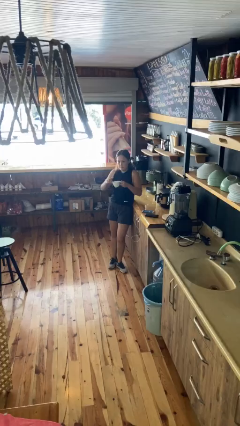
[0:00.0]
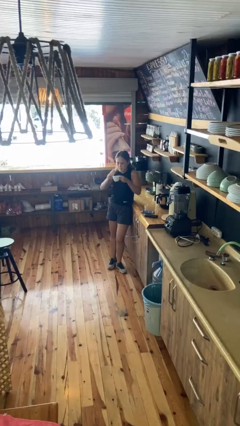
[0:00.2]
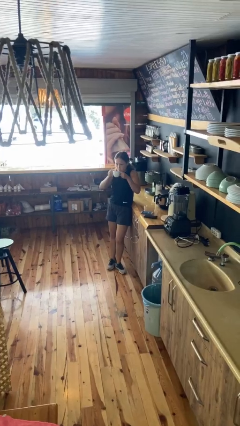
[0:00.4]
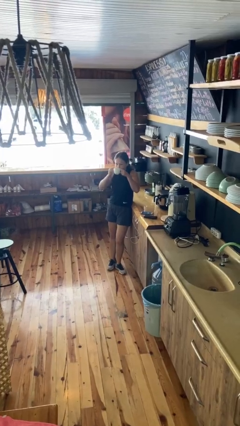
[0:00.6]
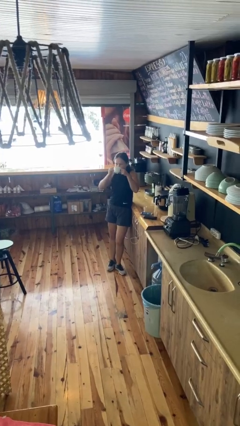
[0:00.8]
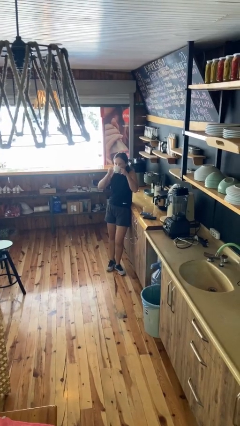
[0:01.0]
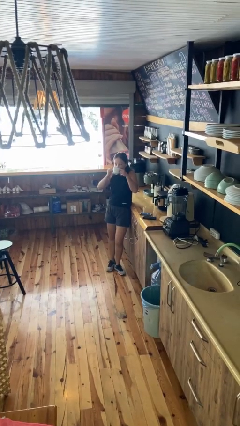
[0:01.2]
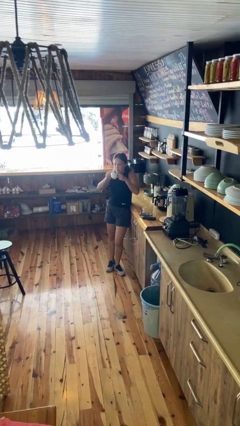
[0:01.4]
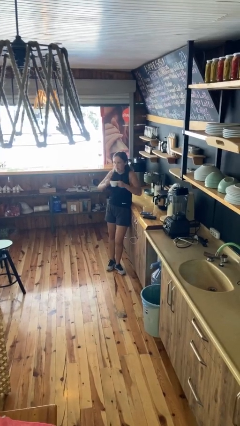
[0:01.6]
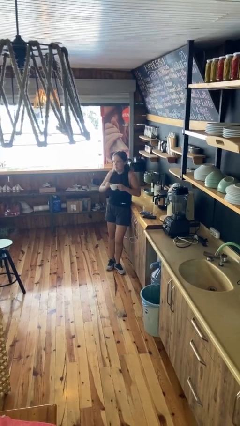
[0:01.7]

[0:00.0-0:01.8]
person drinks from mug

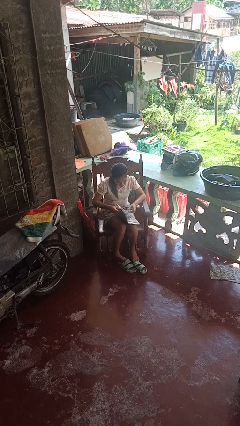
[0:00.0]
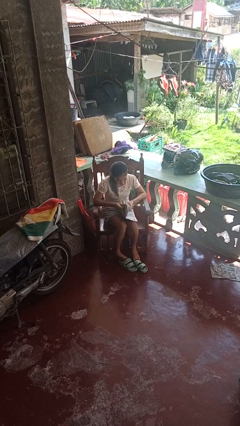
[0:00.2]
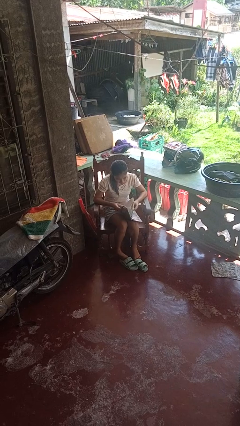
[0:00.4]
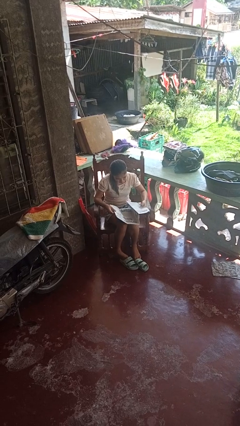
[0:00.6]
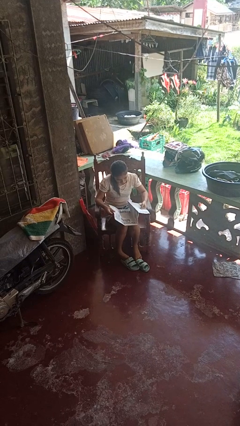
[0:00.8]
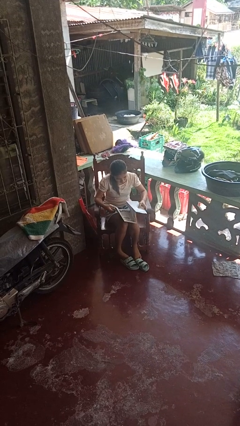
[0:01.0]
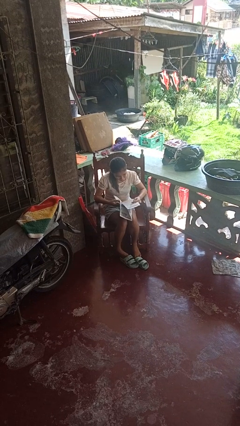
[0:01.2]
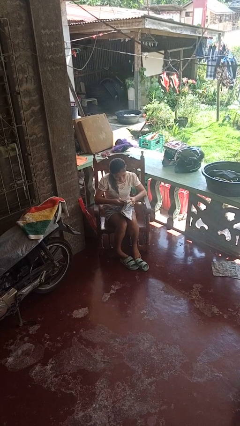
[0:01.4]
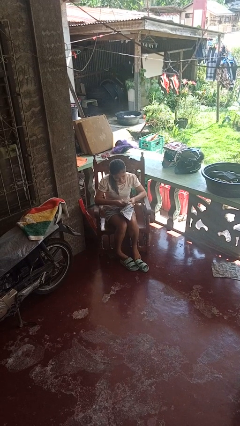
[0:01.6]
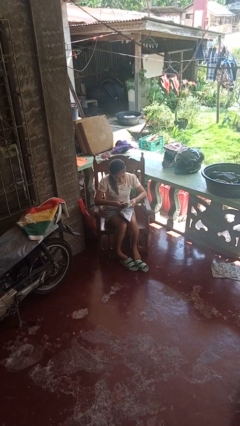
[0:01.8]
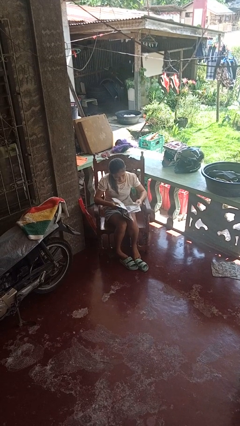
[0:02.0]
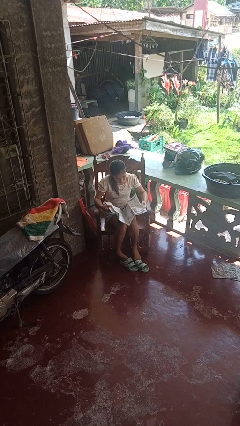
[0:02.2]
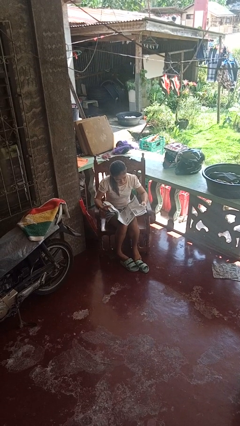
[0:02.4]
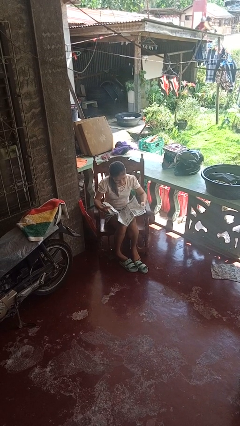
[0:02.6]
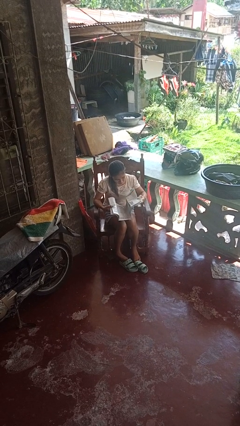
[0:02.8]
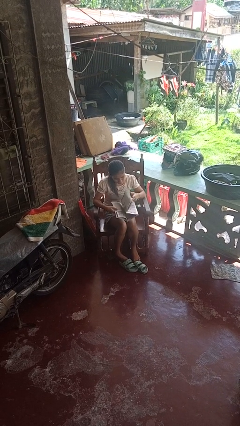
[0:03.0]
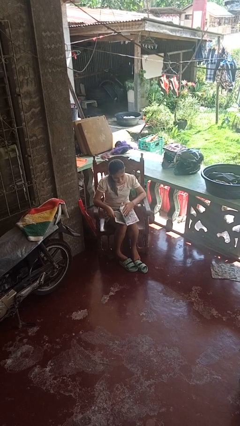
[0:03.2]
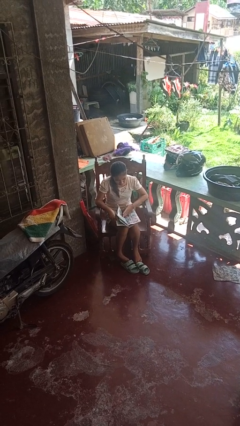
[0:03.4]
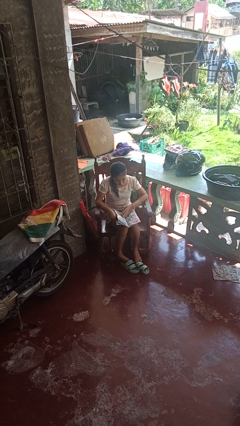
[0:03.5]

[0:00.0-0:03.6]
person reads newspaper

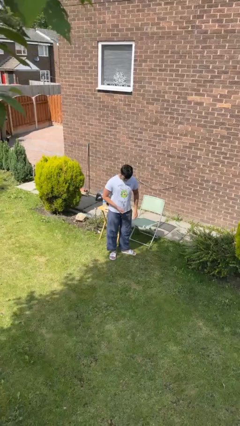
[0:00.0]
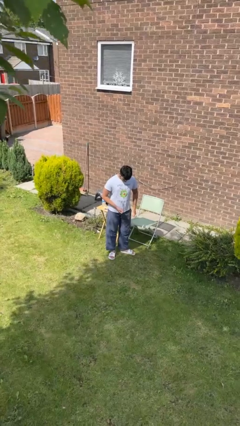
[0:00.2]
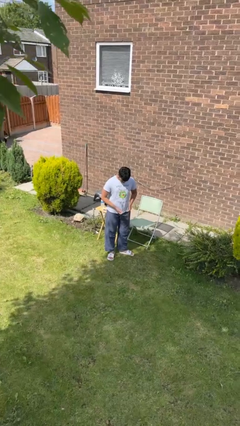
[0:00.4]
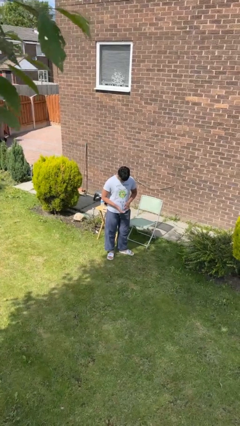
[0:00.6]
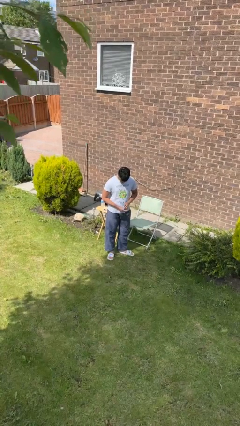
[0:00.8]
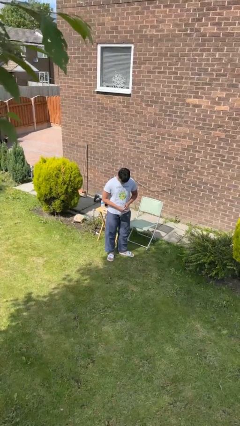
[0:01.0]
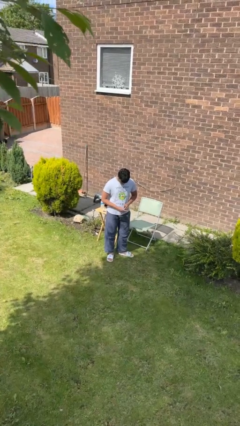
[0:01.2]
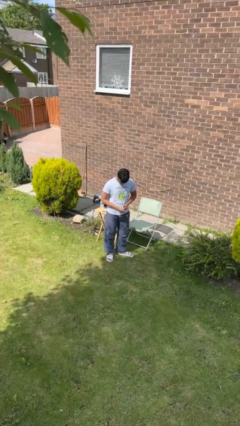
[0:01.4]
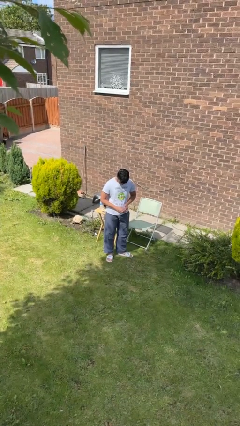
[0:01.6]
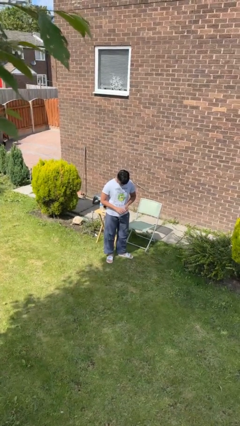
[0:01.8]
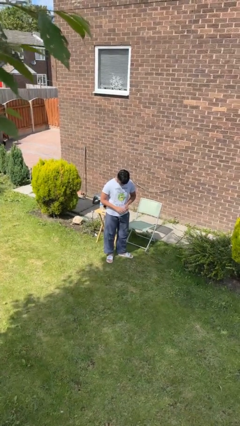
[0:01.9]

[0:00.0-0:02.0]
person puts on ring

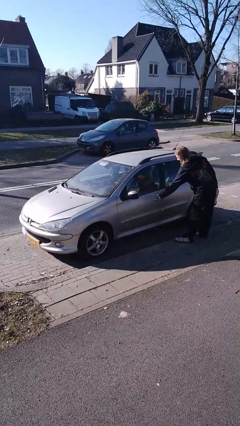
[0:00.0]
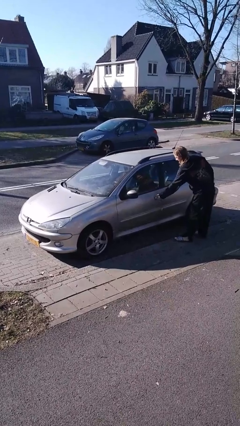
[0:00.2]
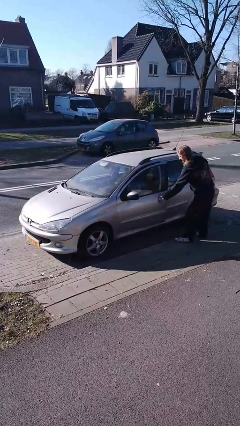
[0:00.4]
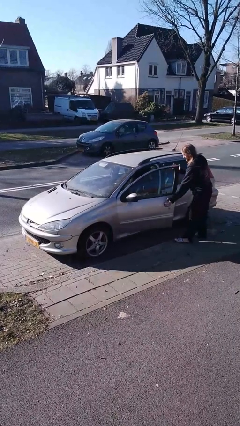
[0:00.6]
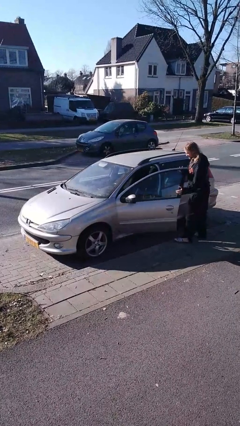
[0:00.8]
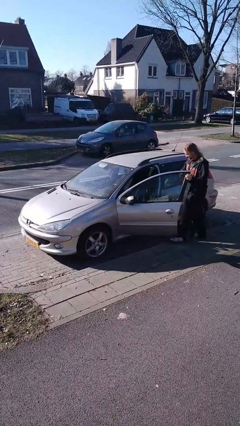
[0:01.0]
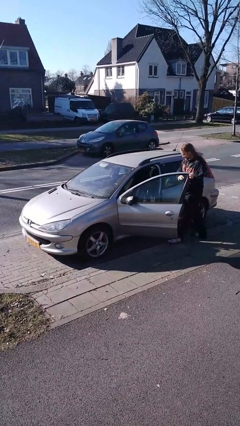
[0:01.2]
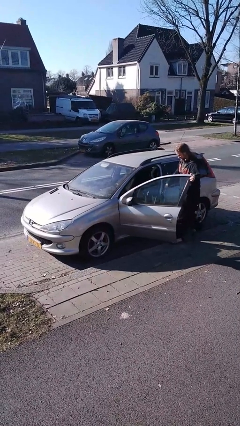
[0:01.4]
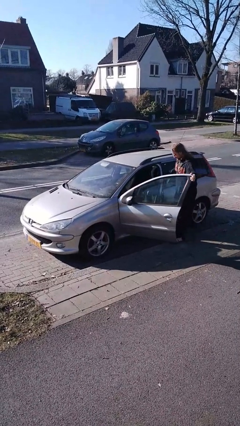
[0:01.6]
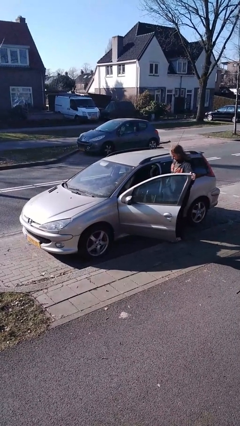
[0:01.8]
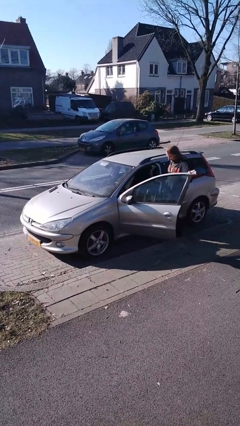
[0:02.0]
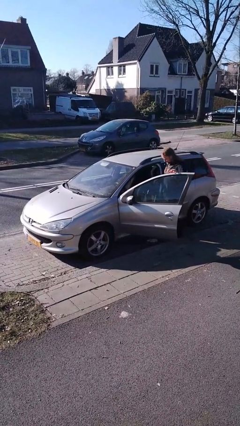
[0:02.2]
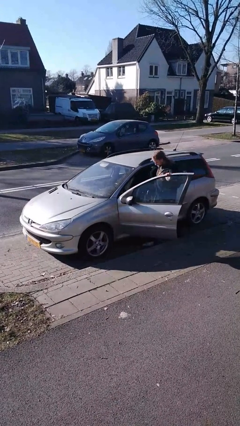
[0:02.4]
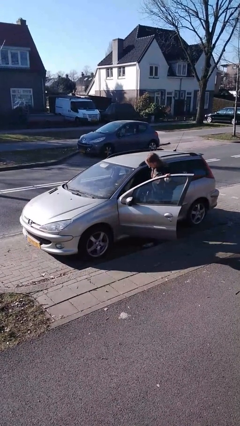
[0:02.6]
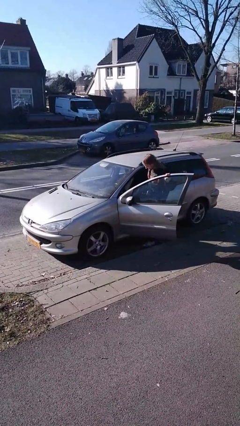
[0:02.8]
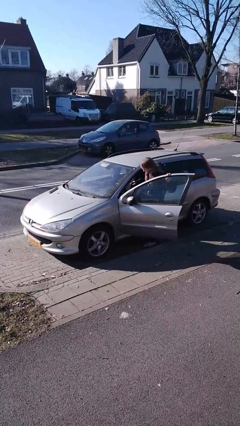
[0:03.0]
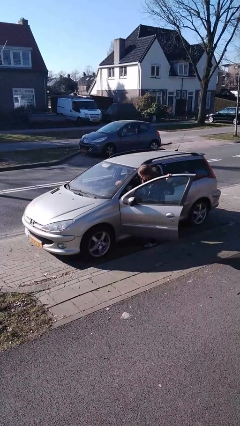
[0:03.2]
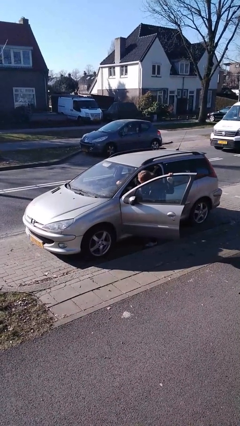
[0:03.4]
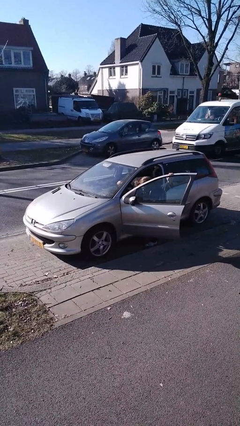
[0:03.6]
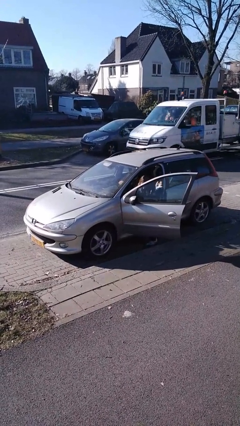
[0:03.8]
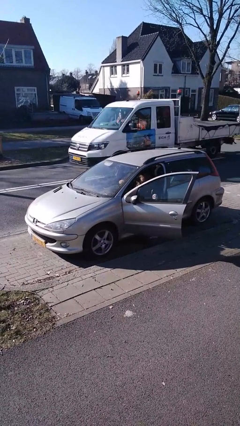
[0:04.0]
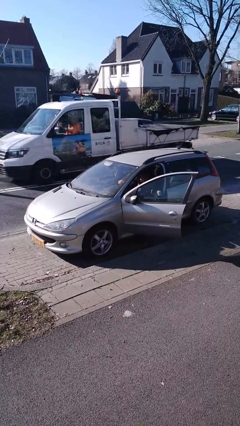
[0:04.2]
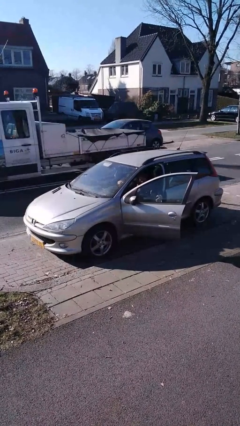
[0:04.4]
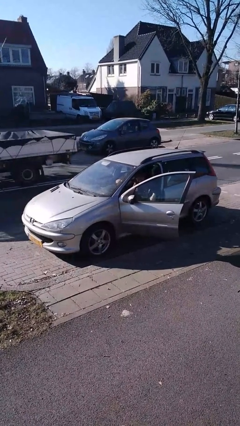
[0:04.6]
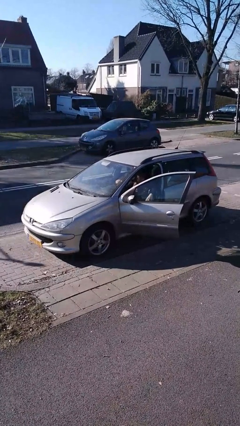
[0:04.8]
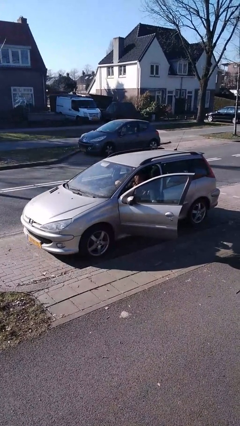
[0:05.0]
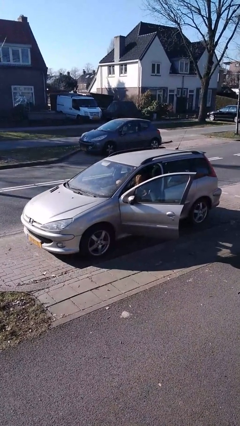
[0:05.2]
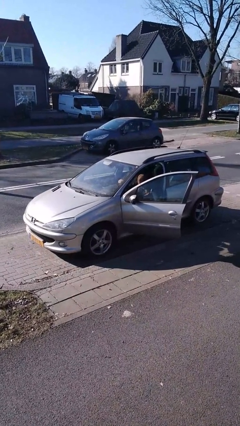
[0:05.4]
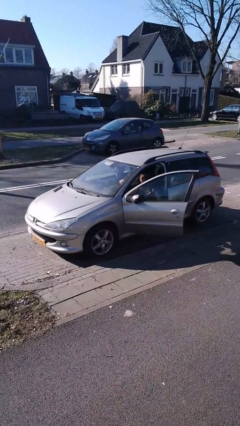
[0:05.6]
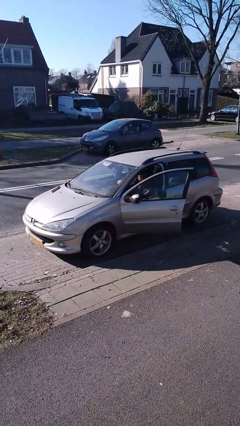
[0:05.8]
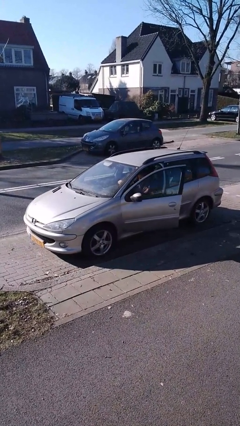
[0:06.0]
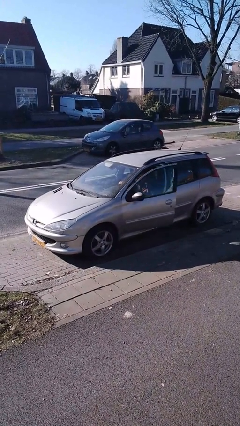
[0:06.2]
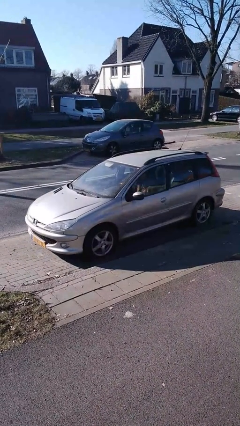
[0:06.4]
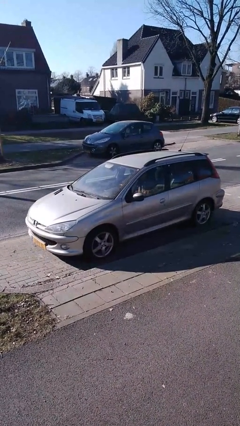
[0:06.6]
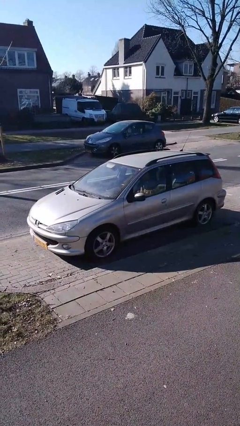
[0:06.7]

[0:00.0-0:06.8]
car picks up person

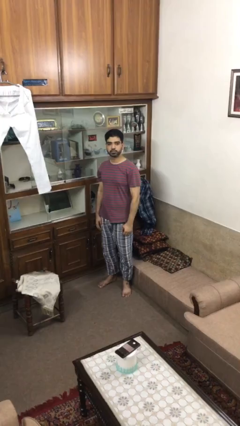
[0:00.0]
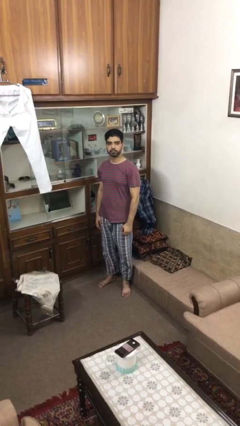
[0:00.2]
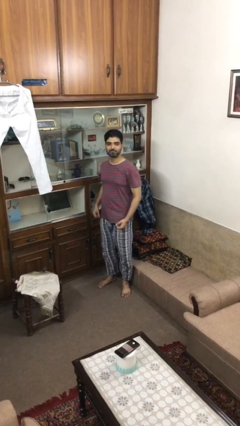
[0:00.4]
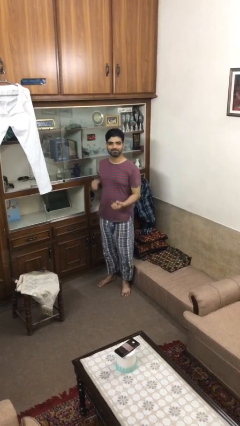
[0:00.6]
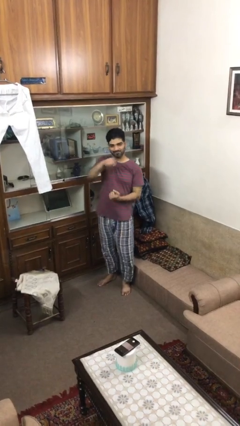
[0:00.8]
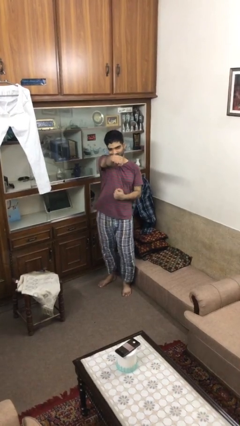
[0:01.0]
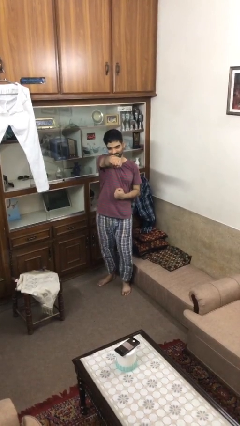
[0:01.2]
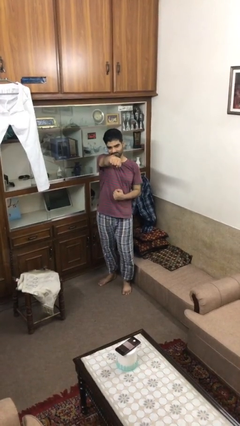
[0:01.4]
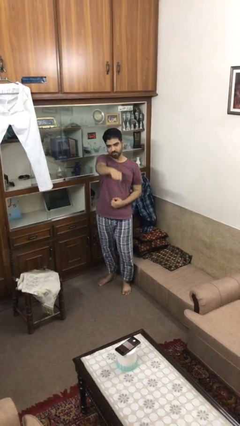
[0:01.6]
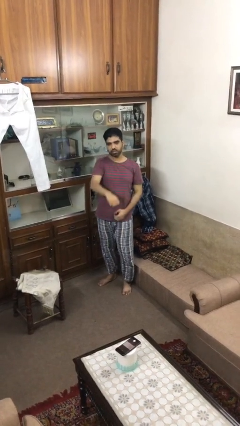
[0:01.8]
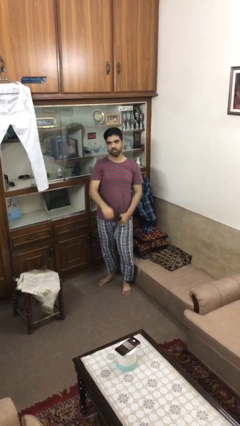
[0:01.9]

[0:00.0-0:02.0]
person punches

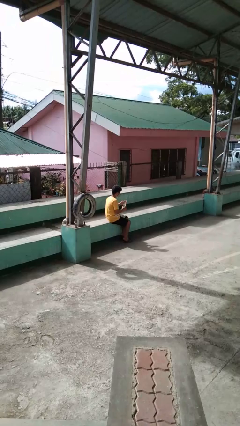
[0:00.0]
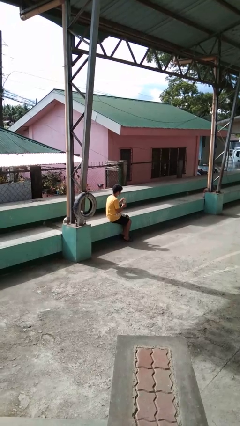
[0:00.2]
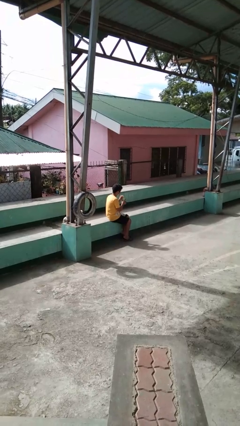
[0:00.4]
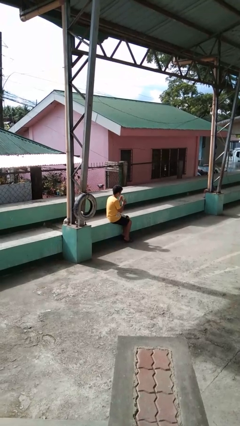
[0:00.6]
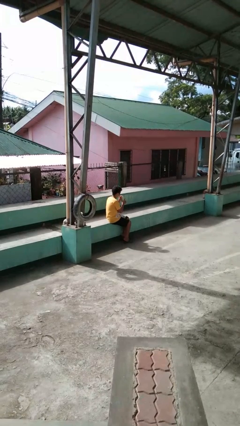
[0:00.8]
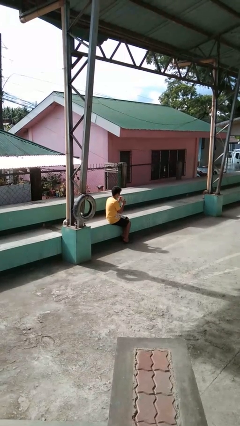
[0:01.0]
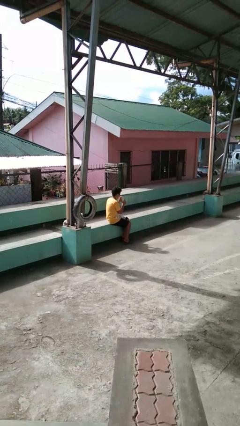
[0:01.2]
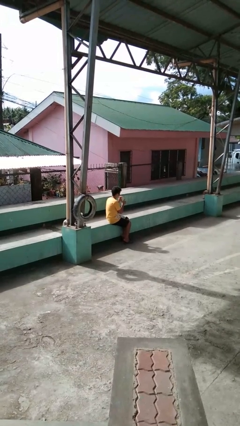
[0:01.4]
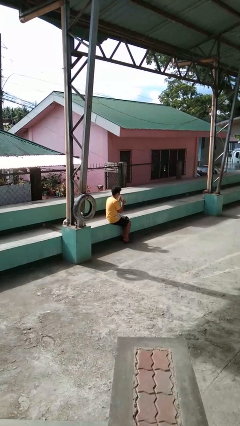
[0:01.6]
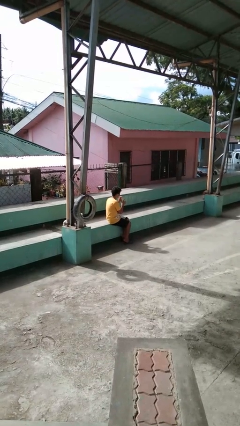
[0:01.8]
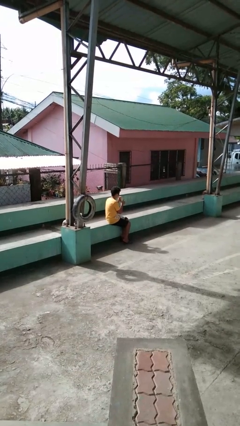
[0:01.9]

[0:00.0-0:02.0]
person drinks from straw
